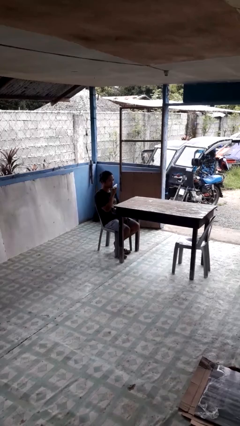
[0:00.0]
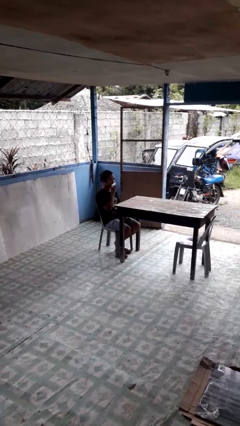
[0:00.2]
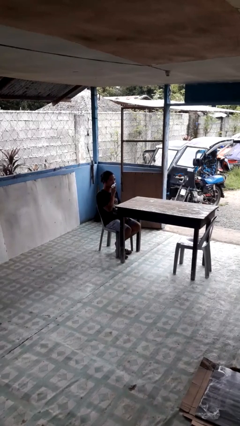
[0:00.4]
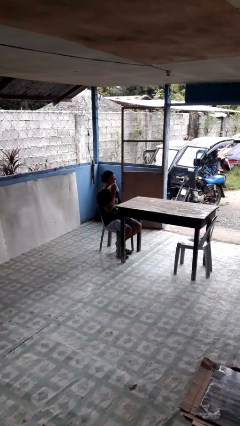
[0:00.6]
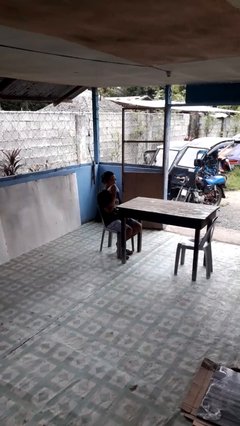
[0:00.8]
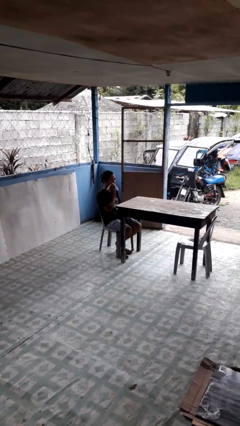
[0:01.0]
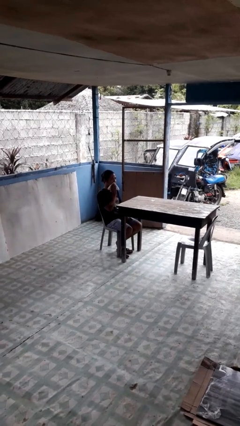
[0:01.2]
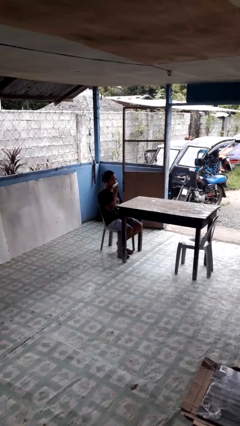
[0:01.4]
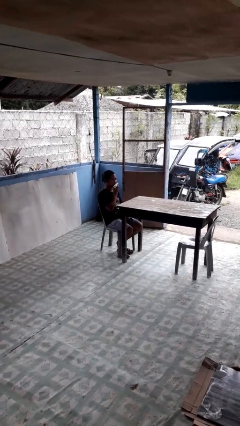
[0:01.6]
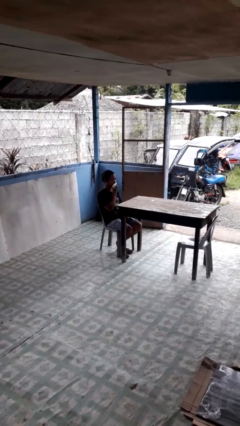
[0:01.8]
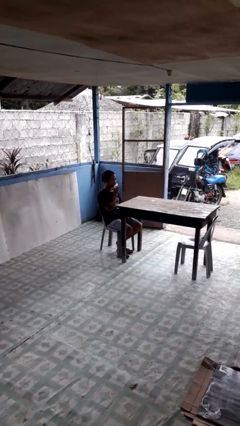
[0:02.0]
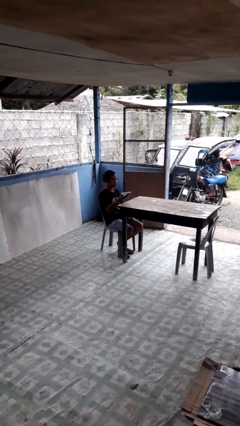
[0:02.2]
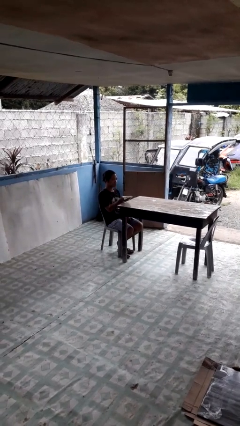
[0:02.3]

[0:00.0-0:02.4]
person wipes mouth with napkin

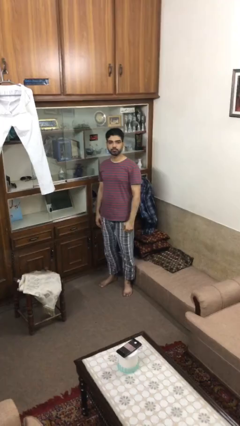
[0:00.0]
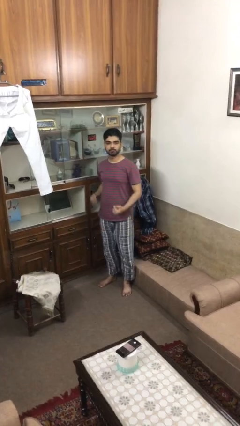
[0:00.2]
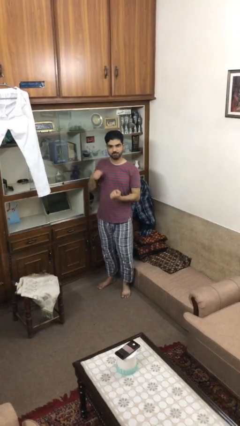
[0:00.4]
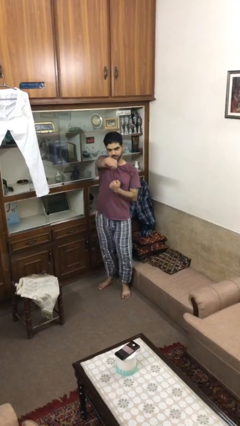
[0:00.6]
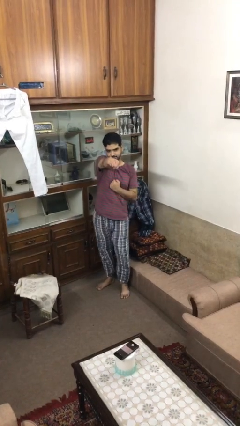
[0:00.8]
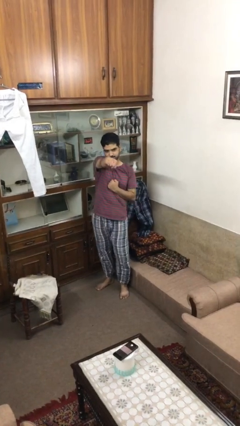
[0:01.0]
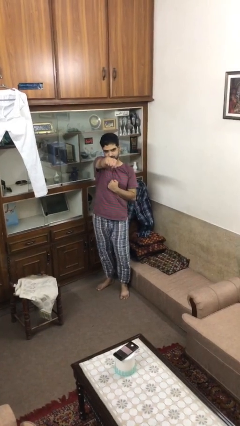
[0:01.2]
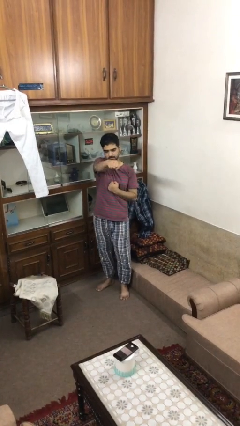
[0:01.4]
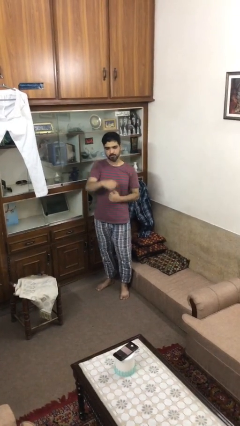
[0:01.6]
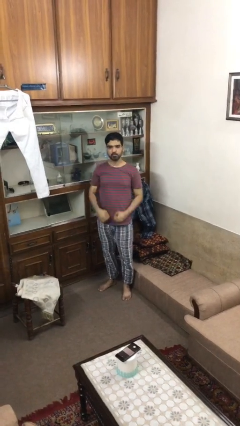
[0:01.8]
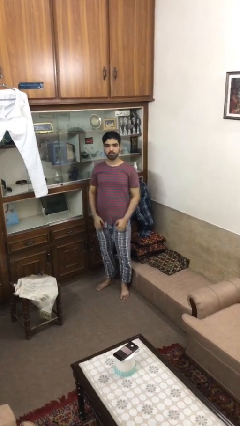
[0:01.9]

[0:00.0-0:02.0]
person punches

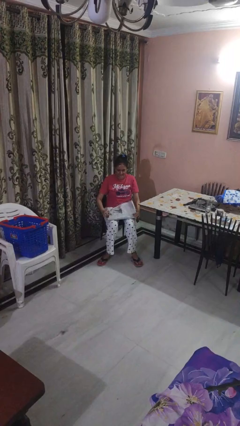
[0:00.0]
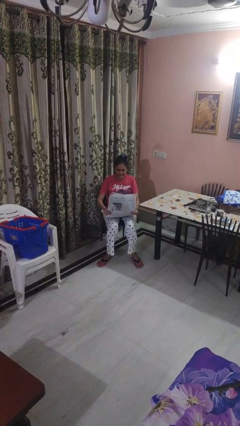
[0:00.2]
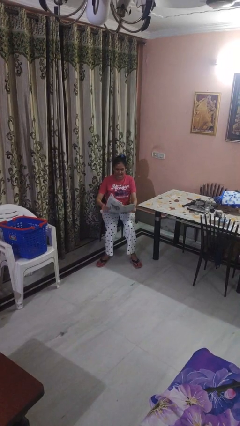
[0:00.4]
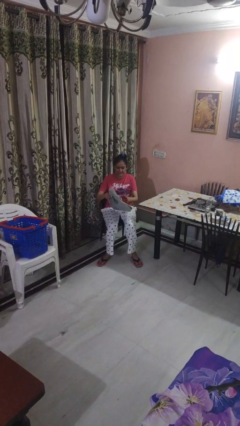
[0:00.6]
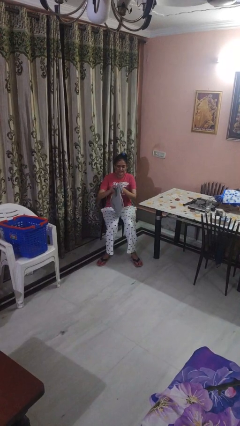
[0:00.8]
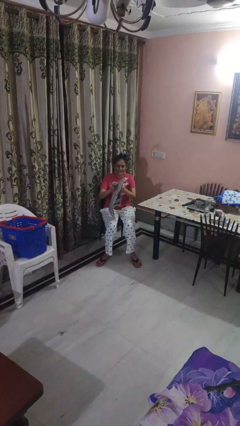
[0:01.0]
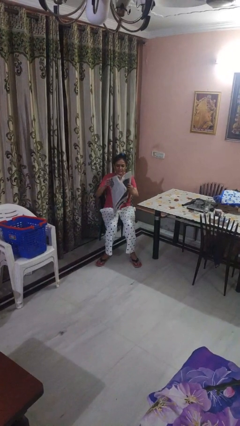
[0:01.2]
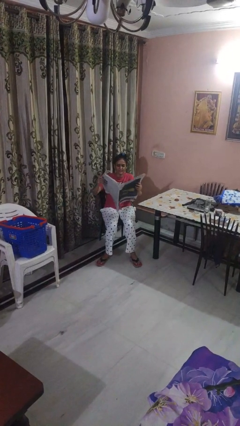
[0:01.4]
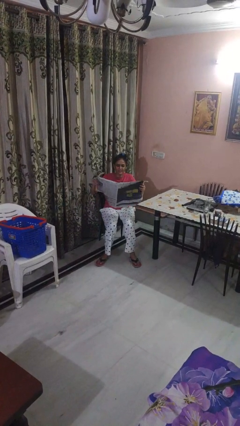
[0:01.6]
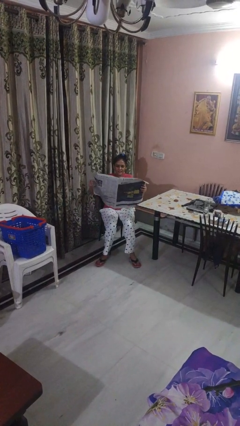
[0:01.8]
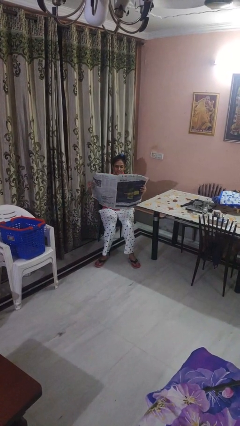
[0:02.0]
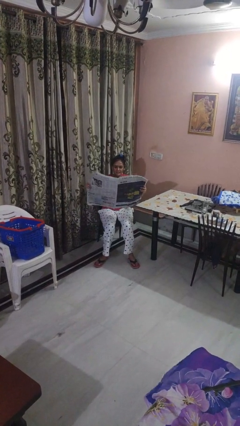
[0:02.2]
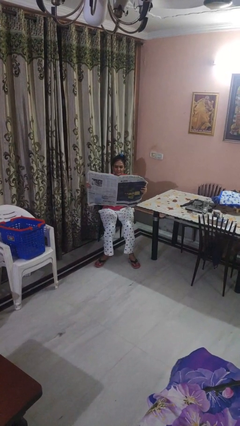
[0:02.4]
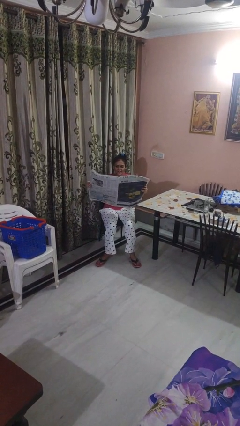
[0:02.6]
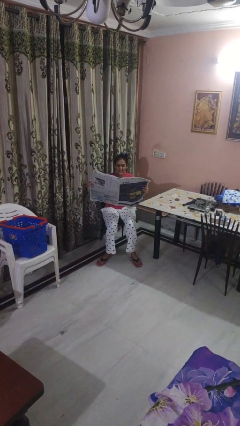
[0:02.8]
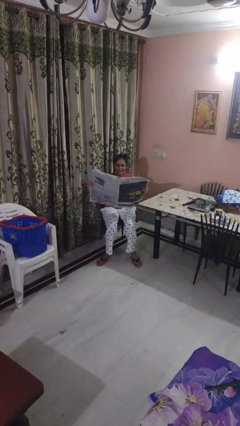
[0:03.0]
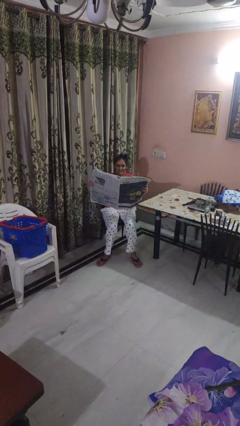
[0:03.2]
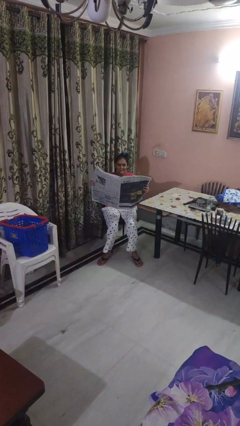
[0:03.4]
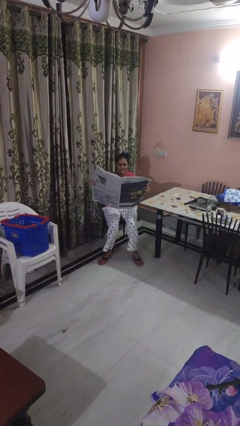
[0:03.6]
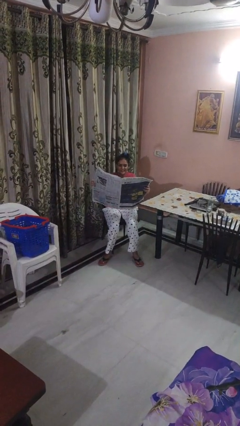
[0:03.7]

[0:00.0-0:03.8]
person reads newspaper

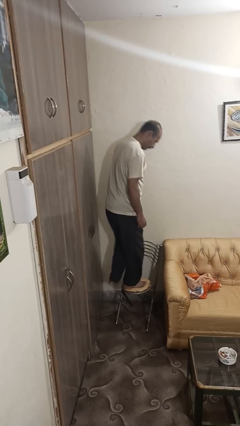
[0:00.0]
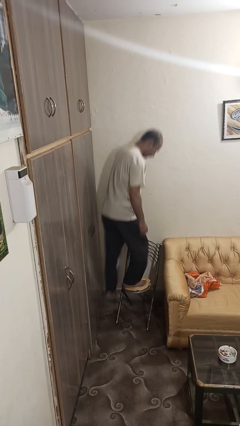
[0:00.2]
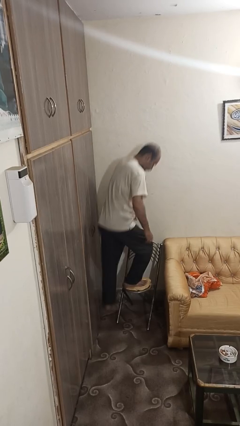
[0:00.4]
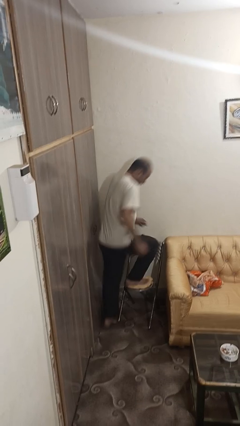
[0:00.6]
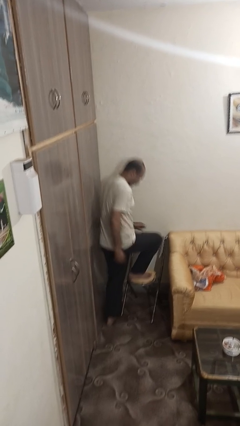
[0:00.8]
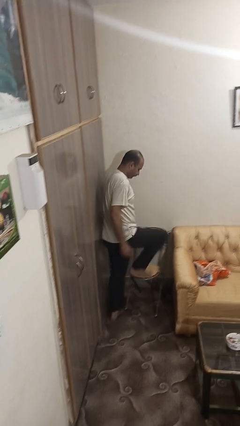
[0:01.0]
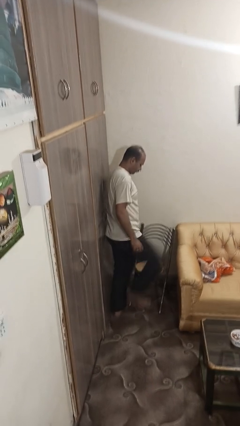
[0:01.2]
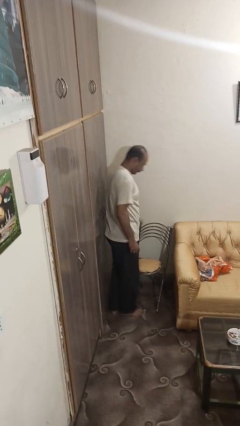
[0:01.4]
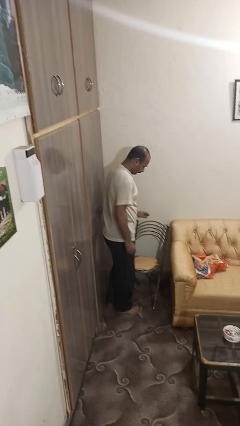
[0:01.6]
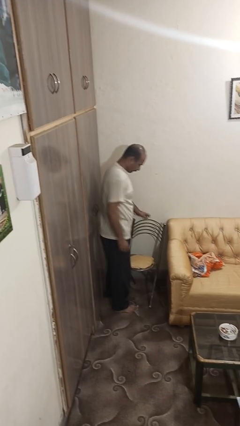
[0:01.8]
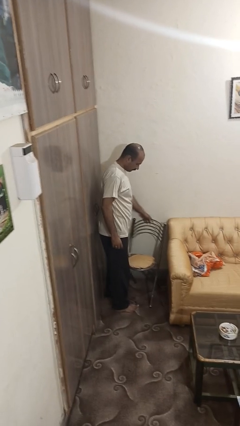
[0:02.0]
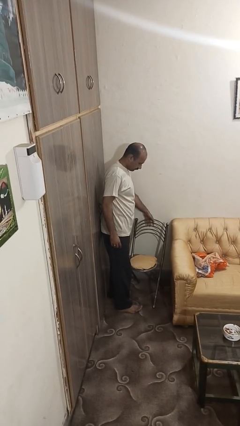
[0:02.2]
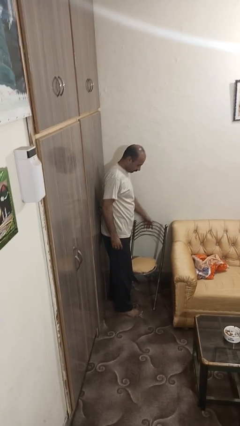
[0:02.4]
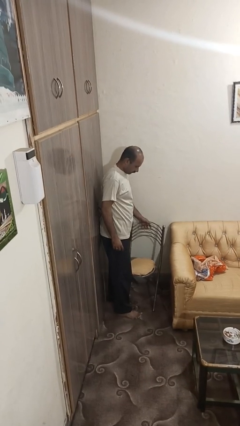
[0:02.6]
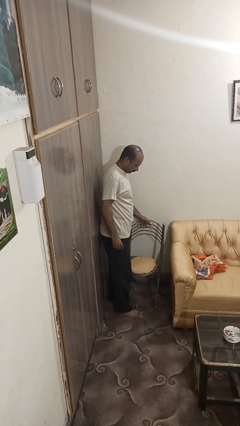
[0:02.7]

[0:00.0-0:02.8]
person climbs off chair

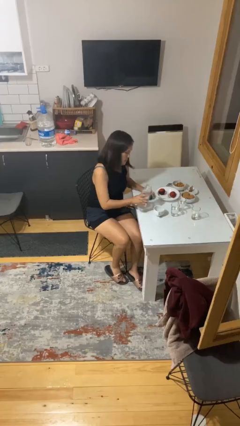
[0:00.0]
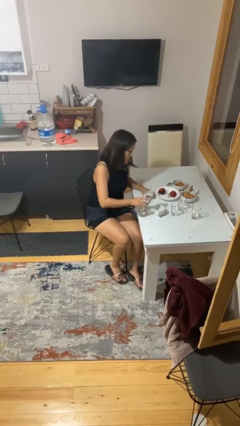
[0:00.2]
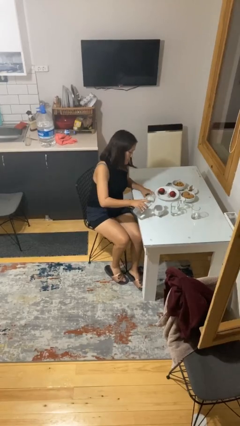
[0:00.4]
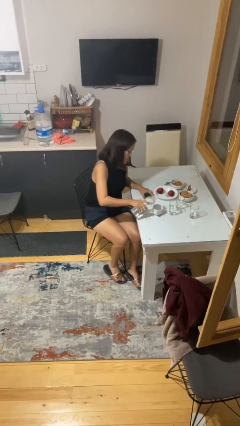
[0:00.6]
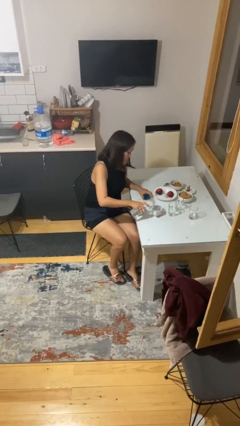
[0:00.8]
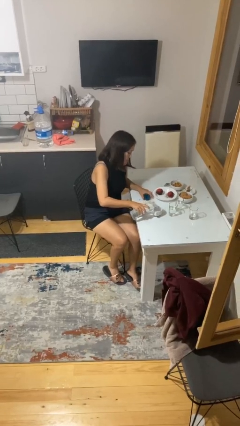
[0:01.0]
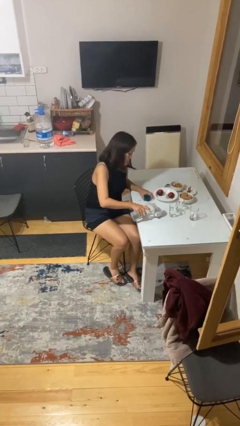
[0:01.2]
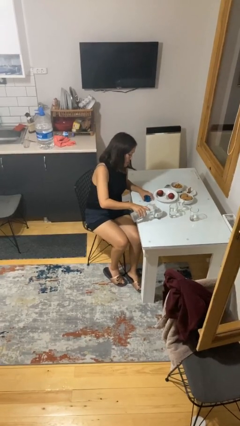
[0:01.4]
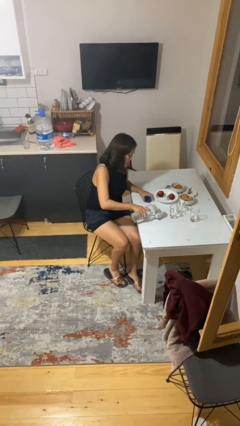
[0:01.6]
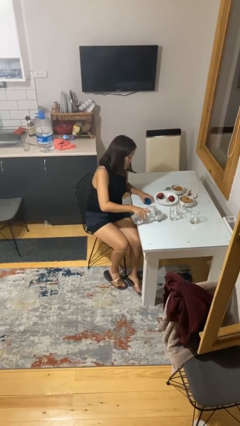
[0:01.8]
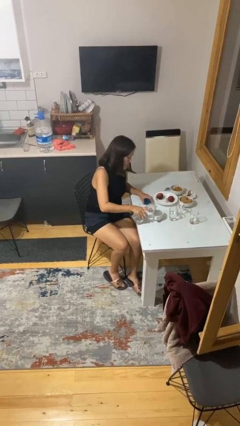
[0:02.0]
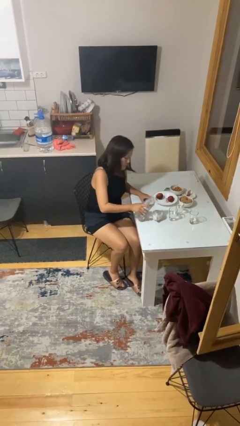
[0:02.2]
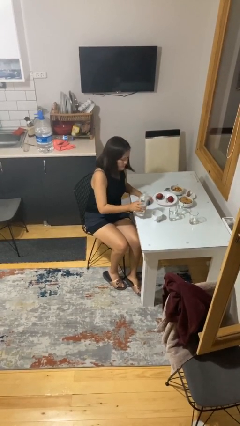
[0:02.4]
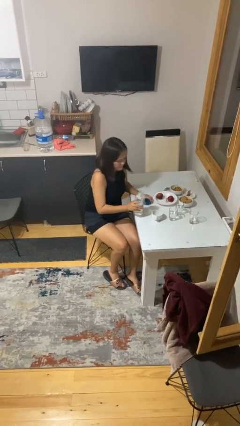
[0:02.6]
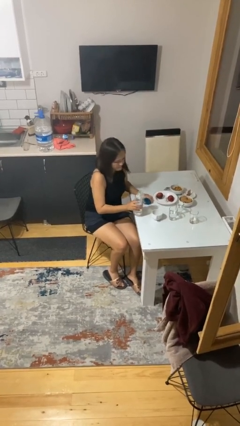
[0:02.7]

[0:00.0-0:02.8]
person pours liquid into cup

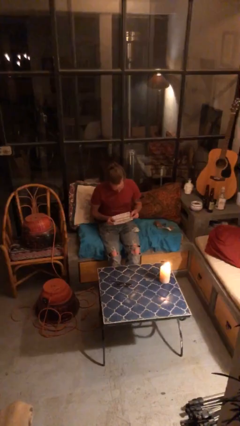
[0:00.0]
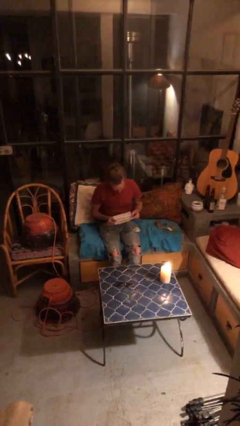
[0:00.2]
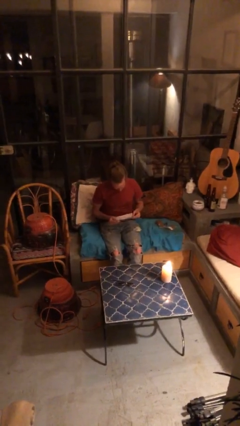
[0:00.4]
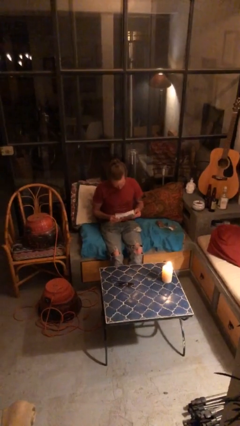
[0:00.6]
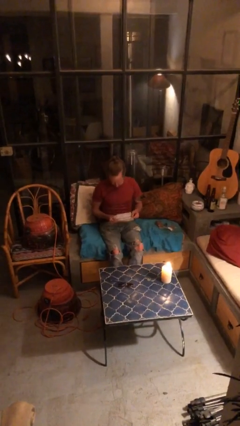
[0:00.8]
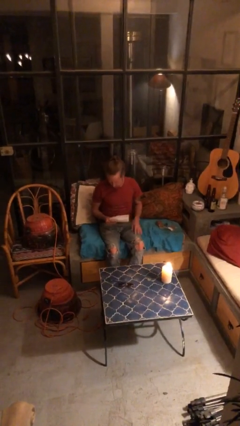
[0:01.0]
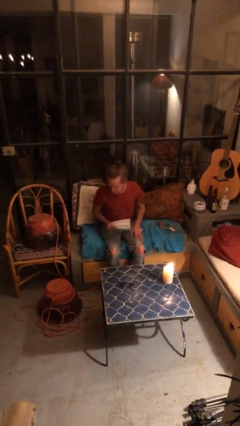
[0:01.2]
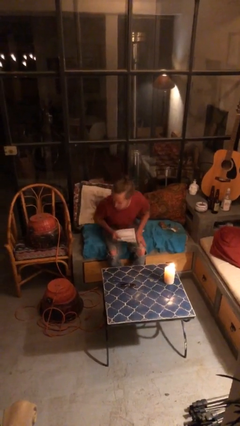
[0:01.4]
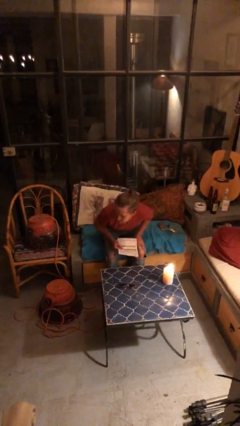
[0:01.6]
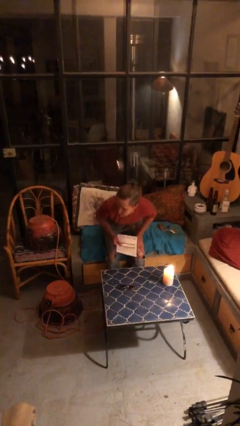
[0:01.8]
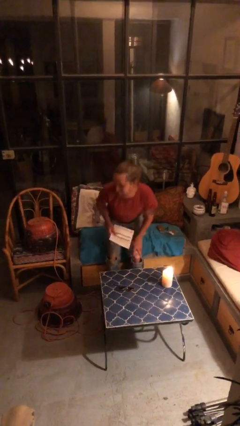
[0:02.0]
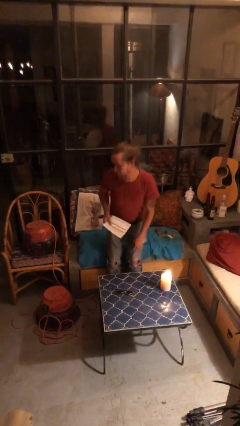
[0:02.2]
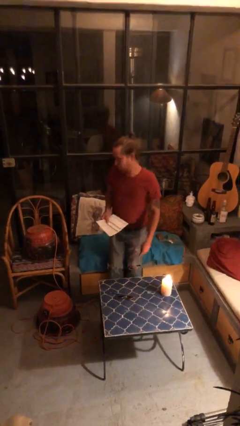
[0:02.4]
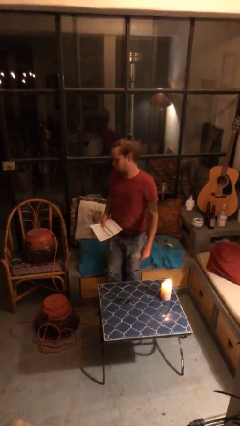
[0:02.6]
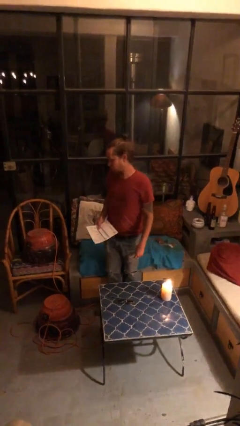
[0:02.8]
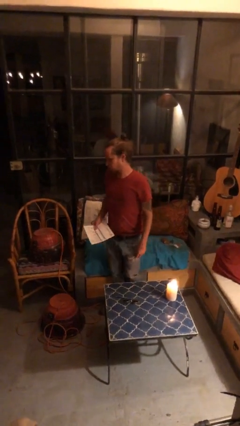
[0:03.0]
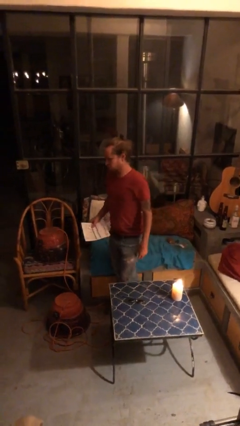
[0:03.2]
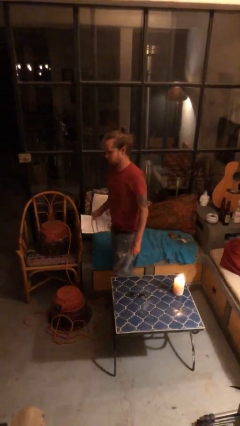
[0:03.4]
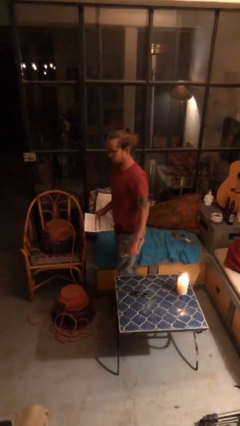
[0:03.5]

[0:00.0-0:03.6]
person stands up
